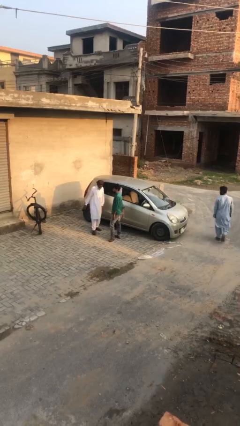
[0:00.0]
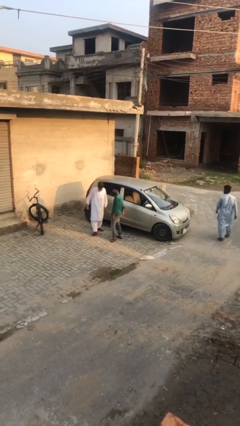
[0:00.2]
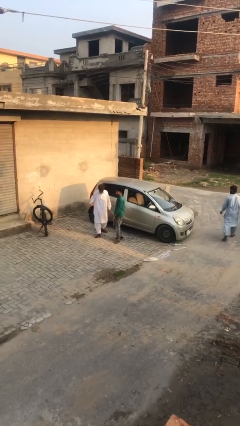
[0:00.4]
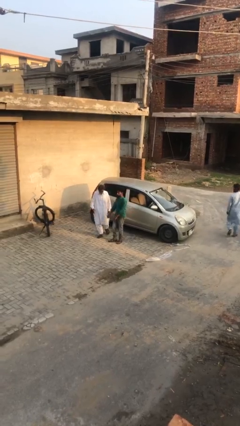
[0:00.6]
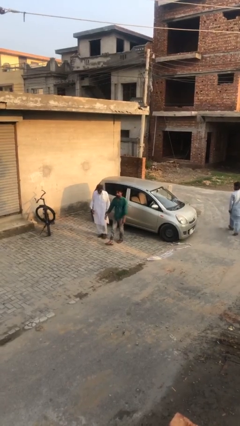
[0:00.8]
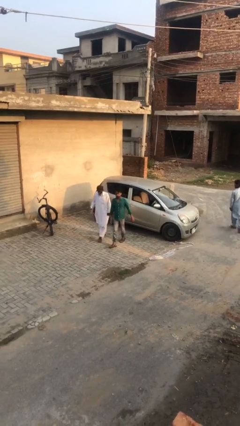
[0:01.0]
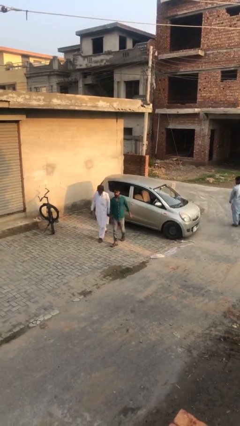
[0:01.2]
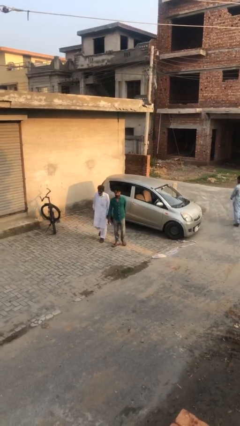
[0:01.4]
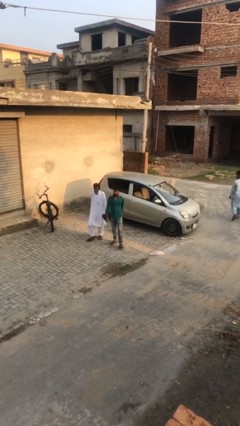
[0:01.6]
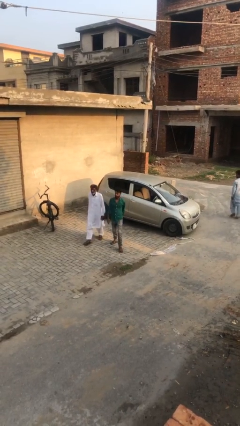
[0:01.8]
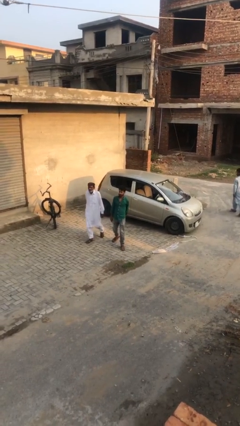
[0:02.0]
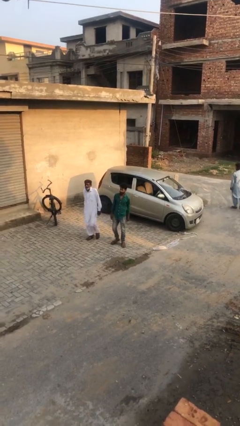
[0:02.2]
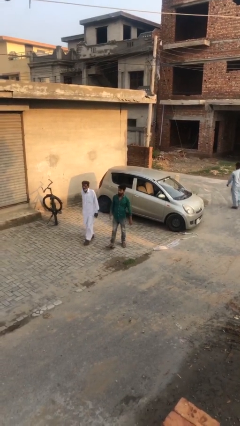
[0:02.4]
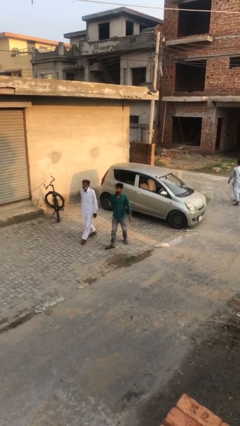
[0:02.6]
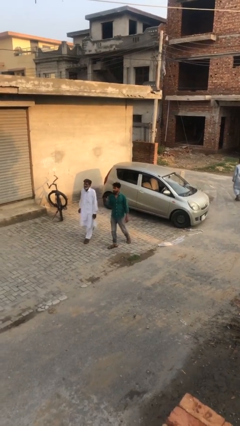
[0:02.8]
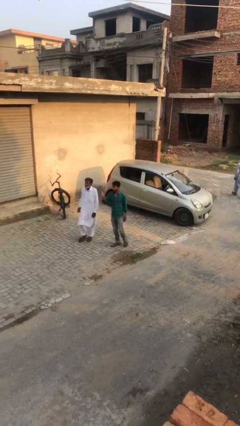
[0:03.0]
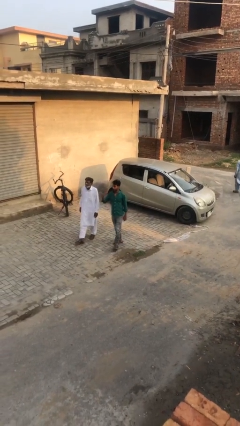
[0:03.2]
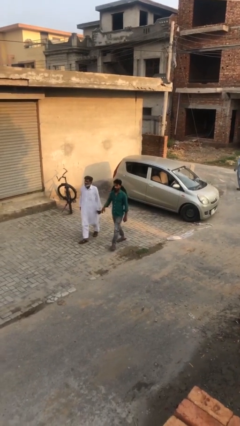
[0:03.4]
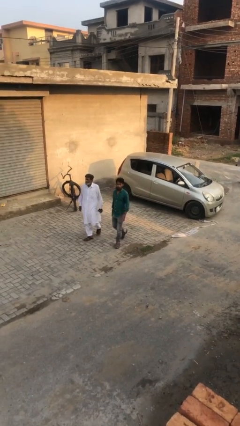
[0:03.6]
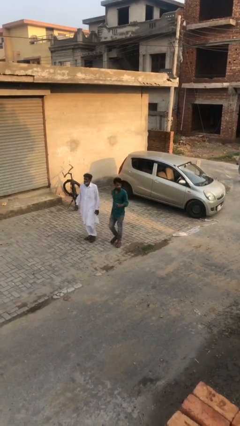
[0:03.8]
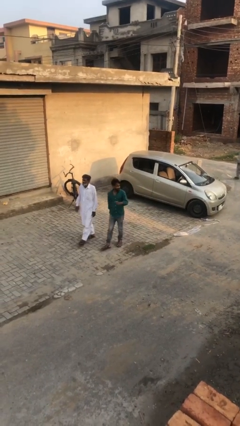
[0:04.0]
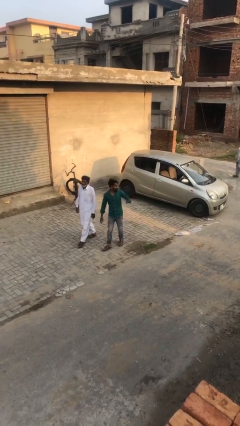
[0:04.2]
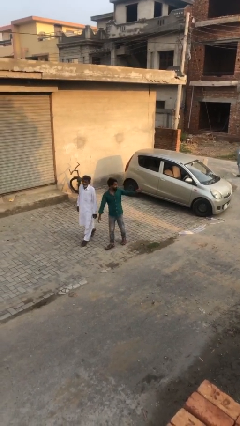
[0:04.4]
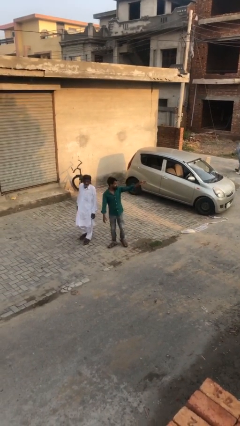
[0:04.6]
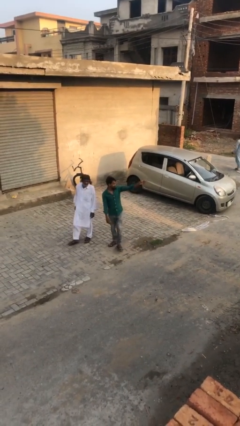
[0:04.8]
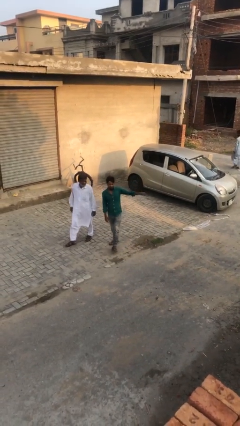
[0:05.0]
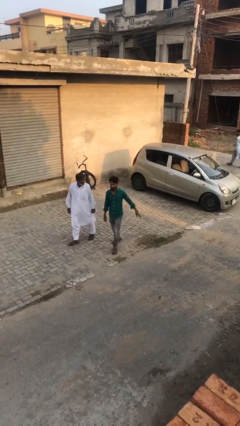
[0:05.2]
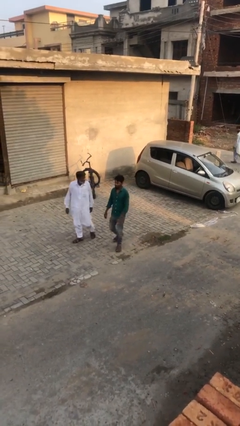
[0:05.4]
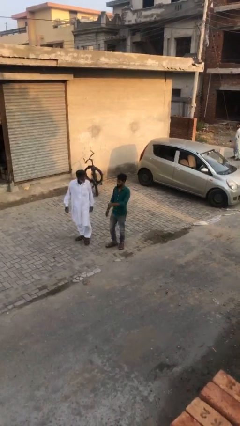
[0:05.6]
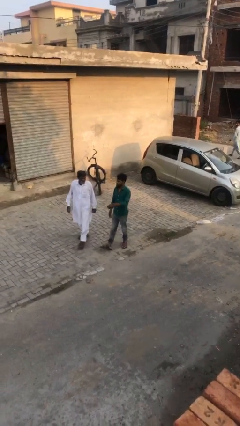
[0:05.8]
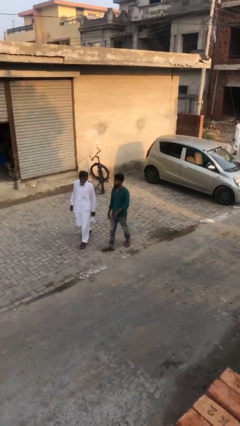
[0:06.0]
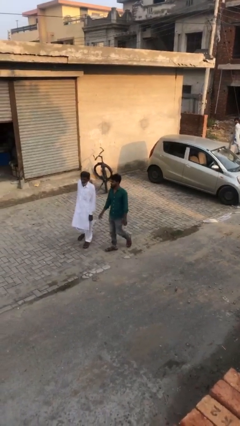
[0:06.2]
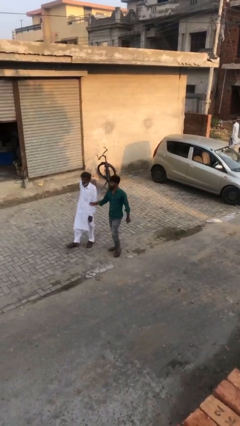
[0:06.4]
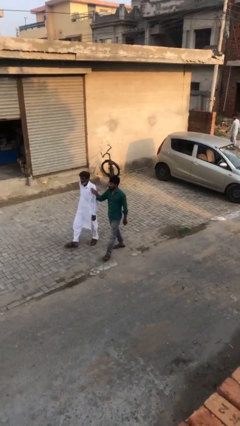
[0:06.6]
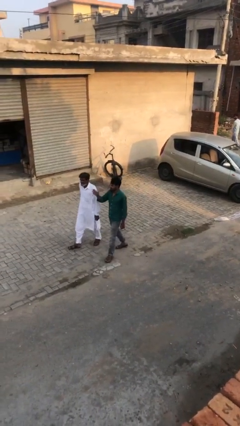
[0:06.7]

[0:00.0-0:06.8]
person talks to person

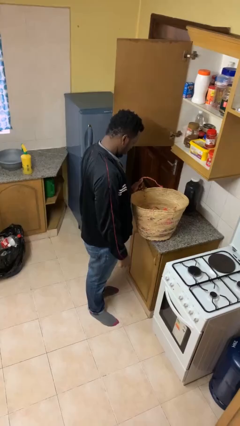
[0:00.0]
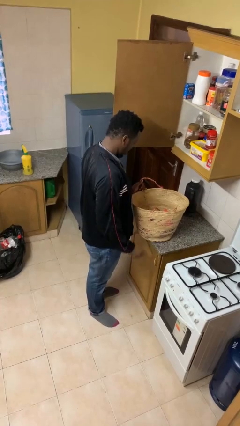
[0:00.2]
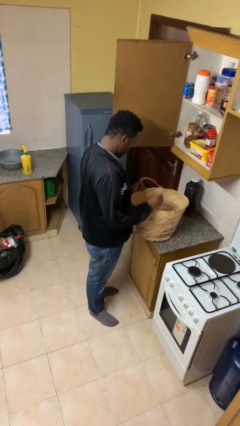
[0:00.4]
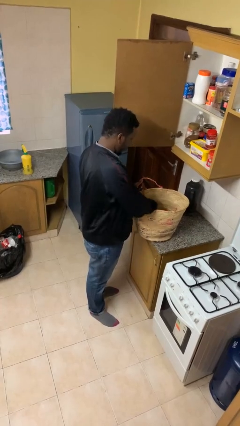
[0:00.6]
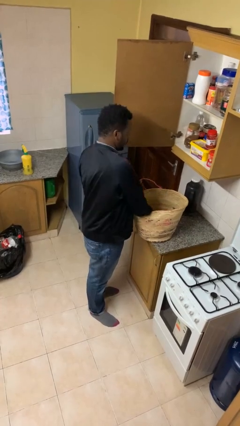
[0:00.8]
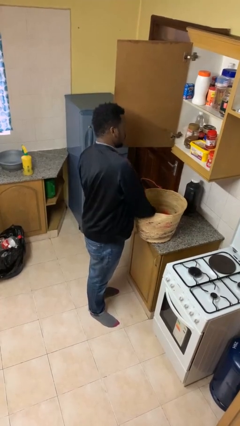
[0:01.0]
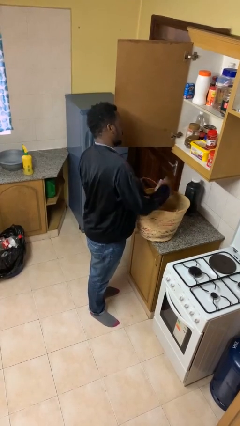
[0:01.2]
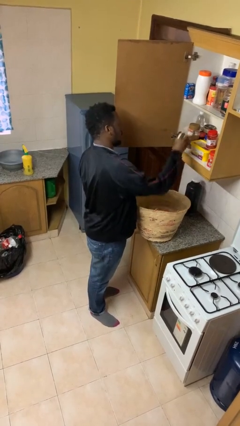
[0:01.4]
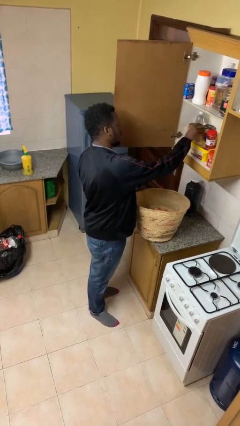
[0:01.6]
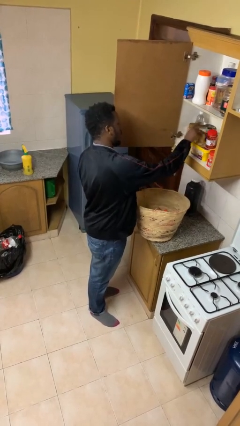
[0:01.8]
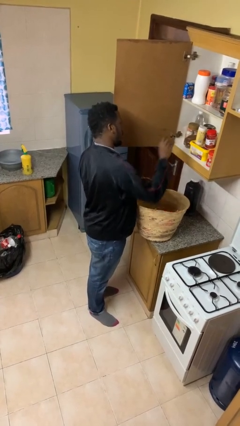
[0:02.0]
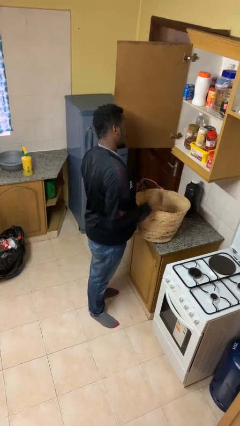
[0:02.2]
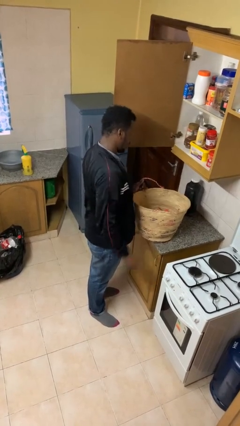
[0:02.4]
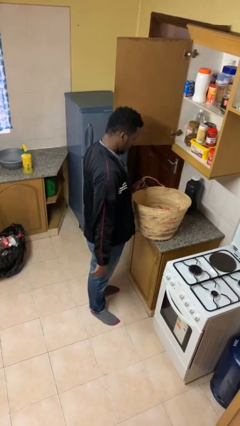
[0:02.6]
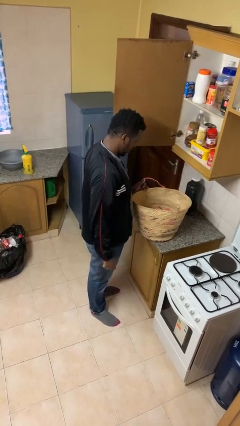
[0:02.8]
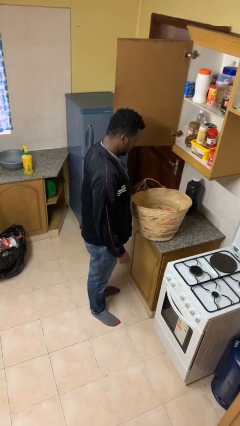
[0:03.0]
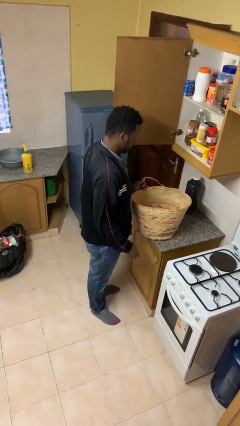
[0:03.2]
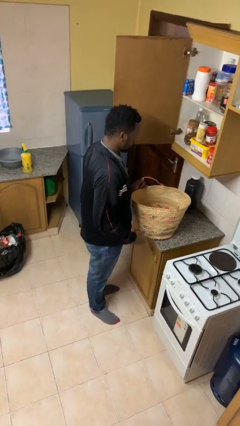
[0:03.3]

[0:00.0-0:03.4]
person loads groceries into cabinet

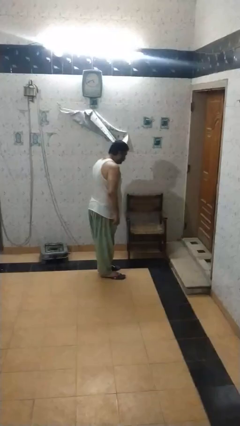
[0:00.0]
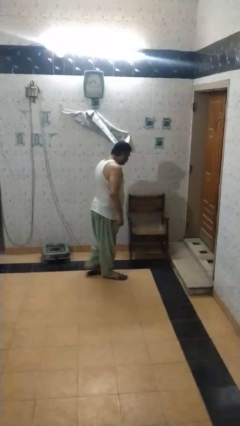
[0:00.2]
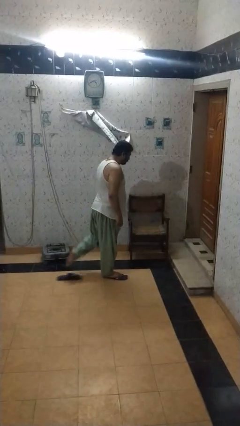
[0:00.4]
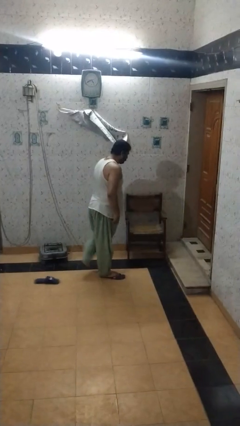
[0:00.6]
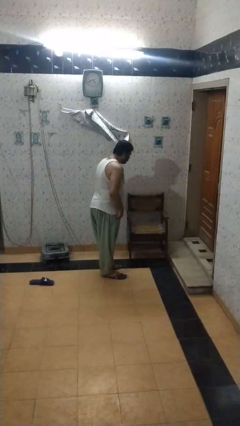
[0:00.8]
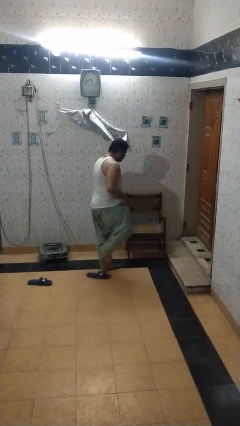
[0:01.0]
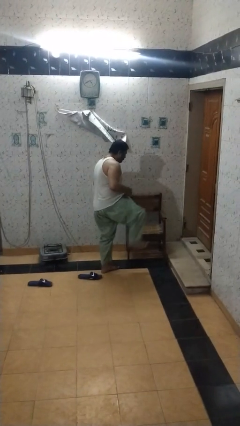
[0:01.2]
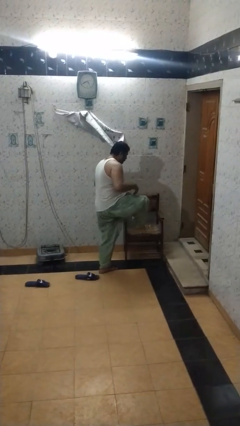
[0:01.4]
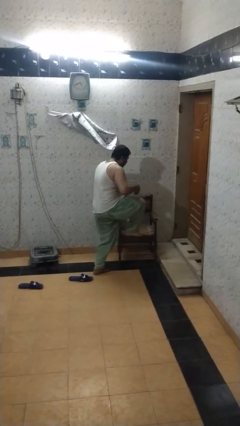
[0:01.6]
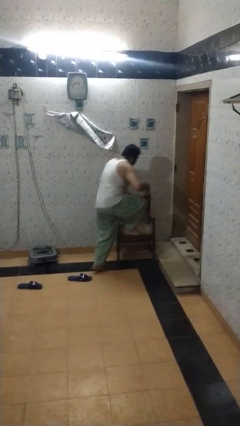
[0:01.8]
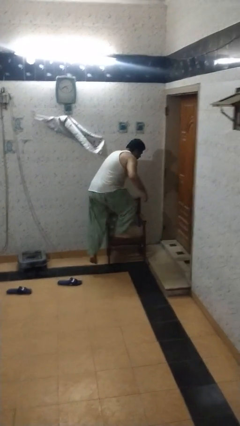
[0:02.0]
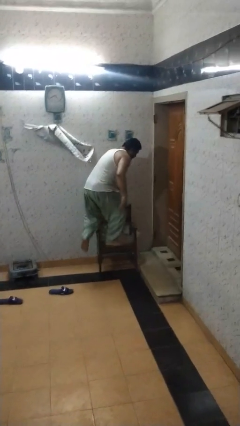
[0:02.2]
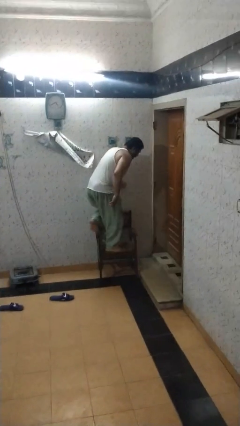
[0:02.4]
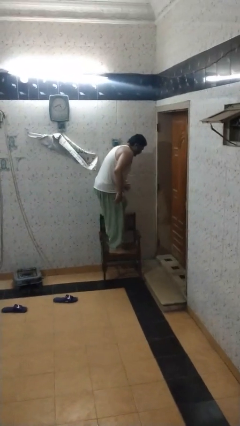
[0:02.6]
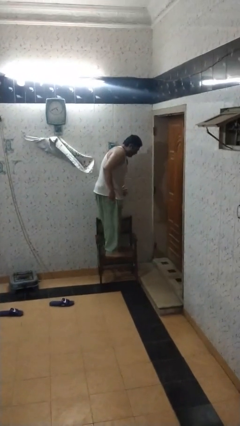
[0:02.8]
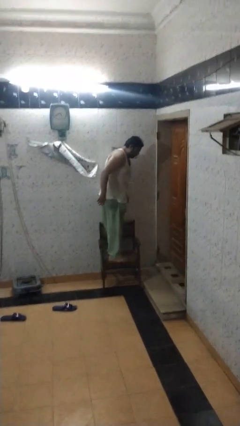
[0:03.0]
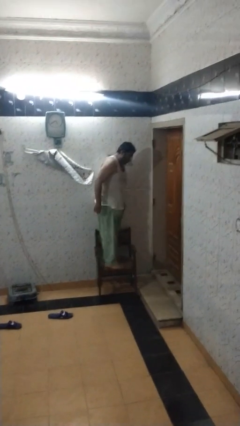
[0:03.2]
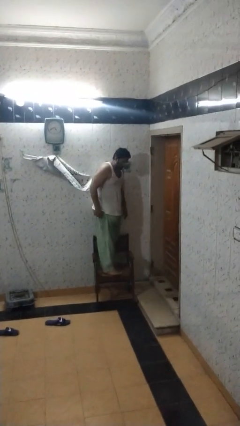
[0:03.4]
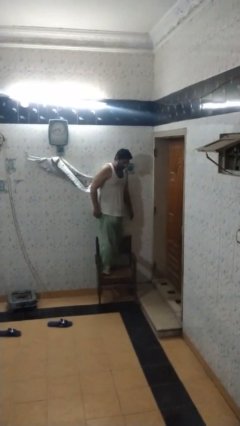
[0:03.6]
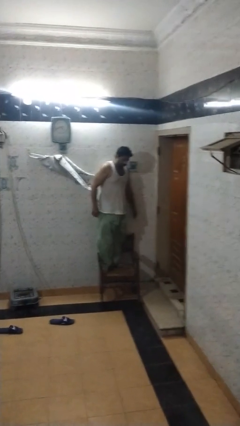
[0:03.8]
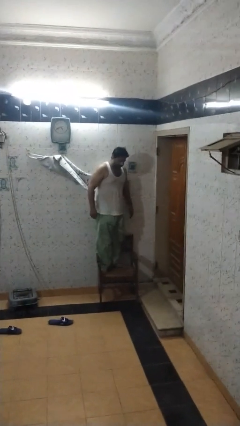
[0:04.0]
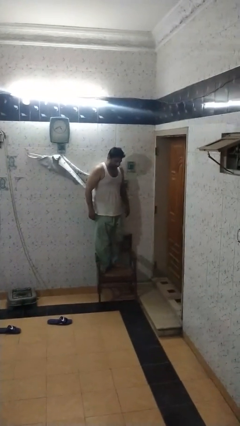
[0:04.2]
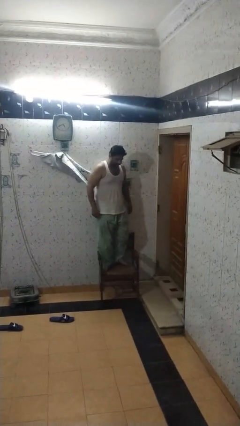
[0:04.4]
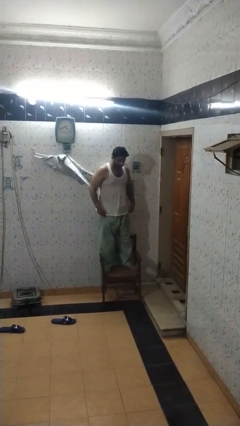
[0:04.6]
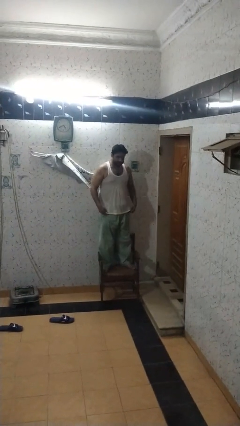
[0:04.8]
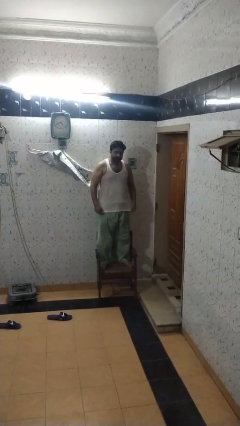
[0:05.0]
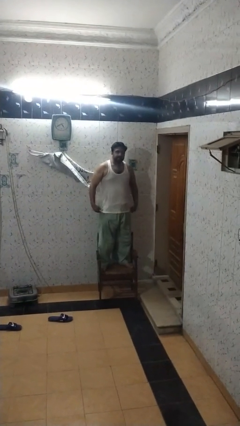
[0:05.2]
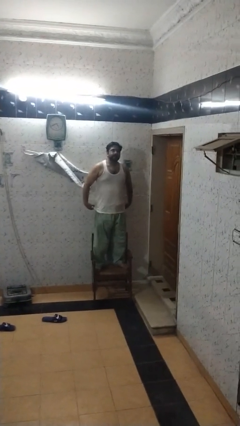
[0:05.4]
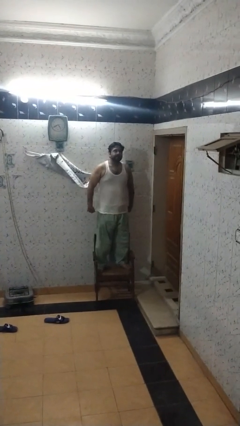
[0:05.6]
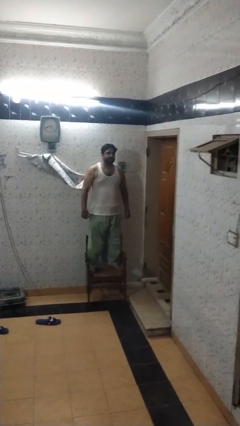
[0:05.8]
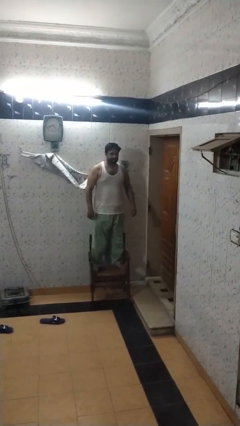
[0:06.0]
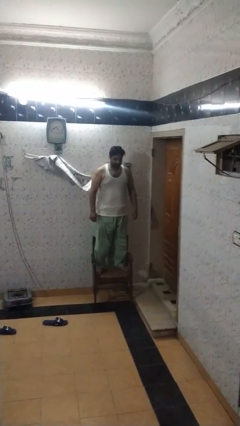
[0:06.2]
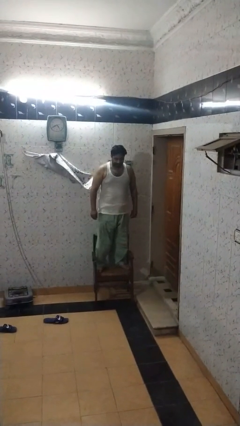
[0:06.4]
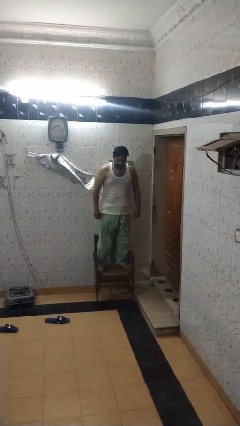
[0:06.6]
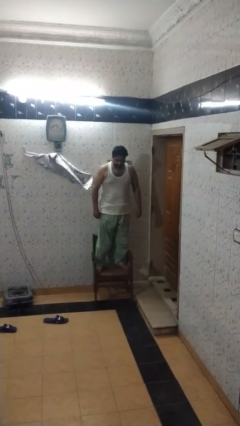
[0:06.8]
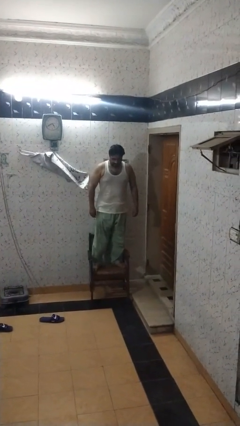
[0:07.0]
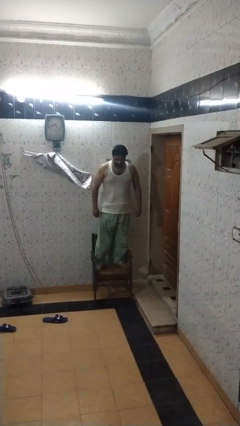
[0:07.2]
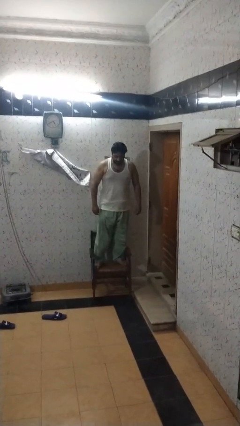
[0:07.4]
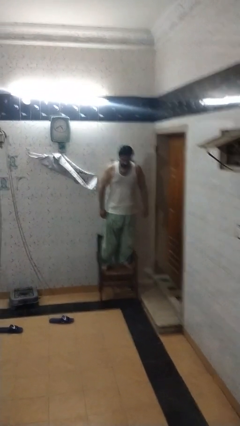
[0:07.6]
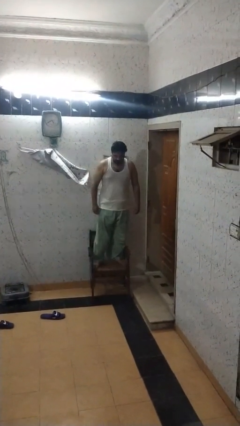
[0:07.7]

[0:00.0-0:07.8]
person climbs on chair

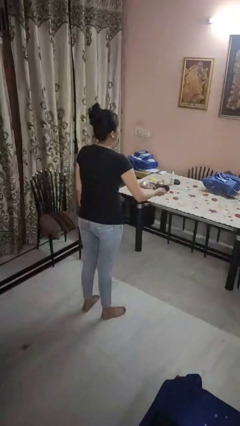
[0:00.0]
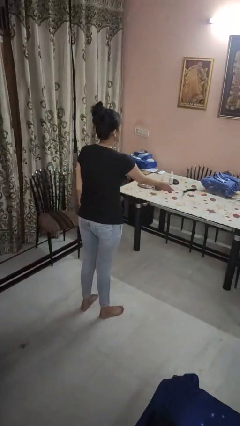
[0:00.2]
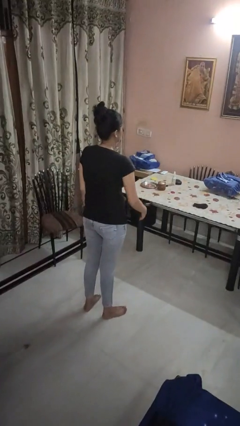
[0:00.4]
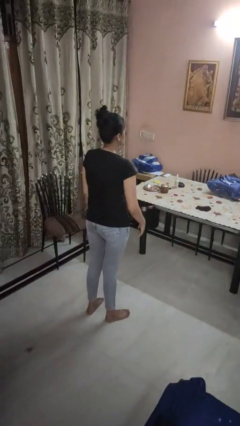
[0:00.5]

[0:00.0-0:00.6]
person throws object on table
